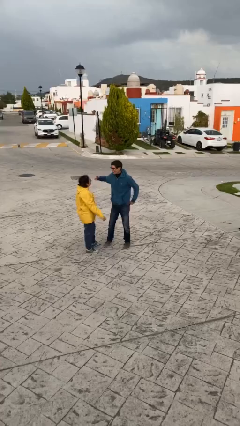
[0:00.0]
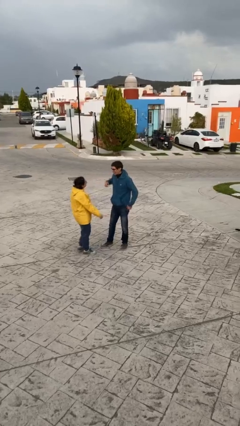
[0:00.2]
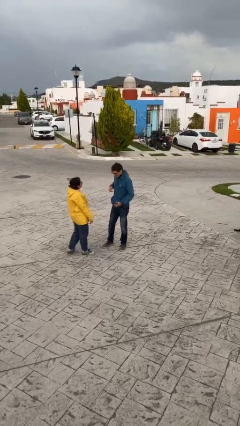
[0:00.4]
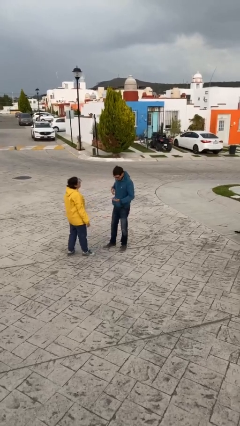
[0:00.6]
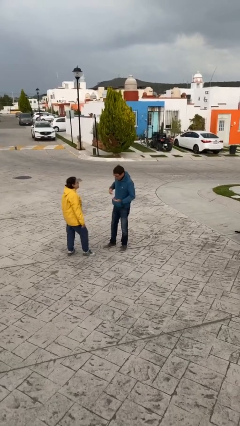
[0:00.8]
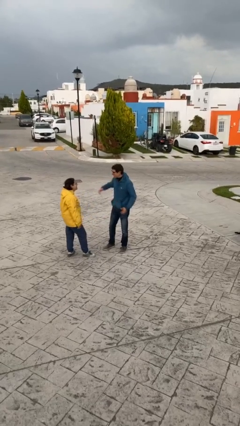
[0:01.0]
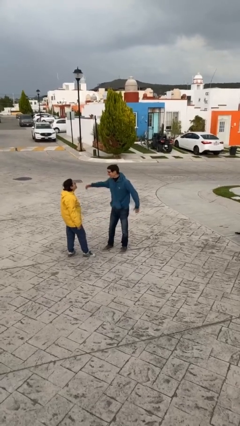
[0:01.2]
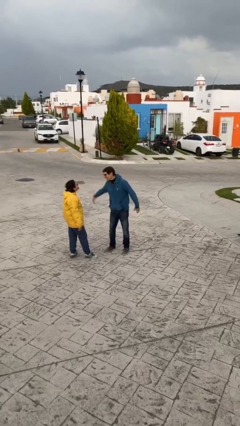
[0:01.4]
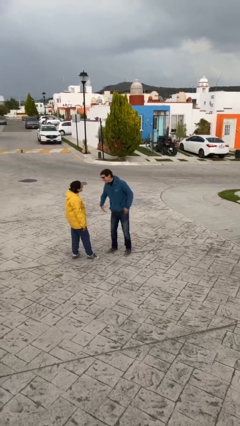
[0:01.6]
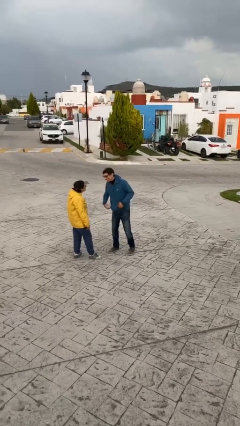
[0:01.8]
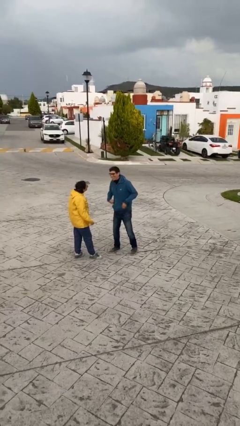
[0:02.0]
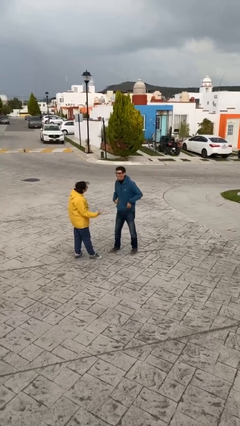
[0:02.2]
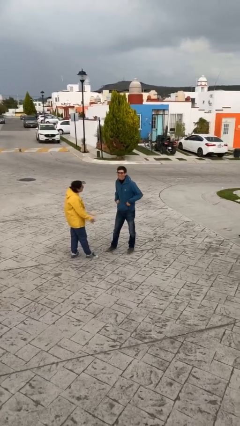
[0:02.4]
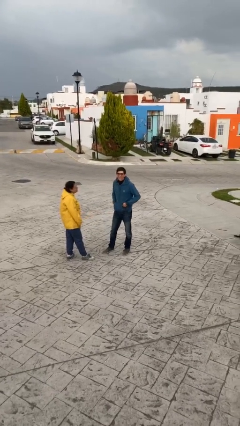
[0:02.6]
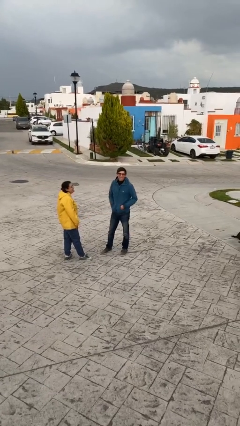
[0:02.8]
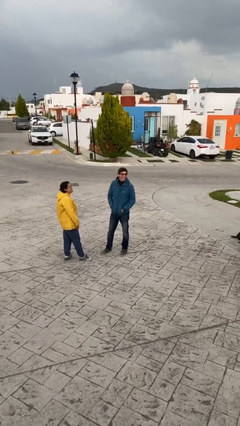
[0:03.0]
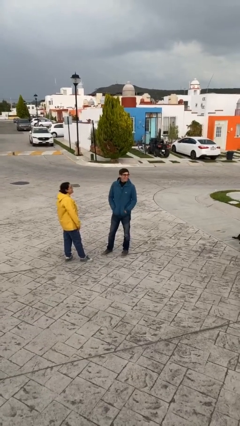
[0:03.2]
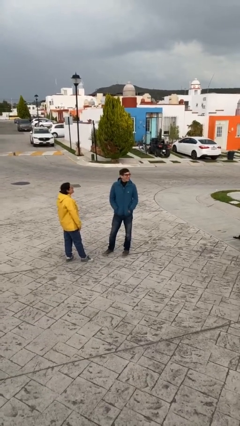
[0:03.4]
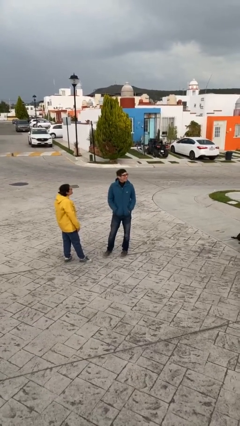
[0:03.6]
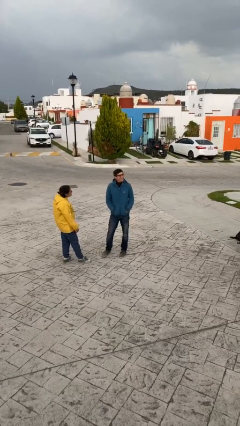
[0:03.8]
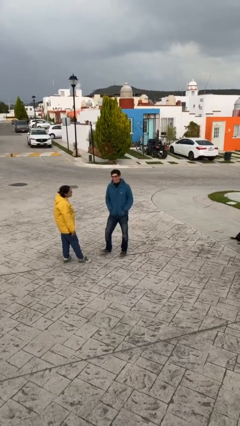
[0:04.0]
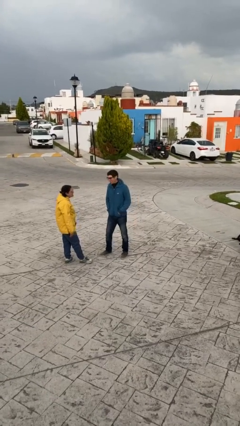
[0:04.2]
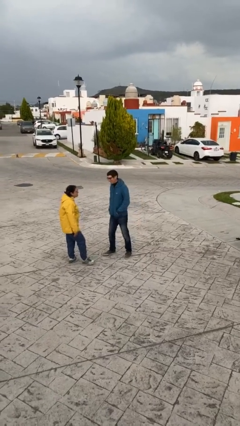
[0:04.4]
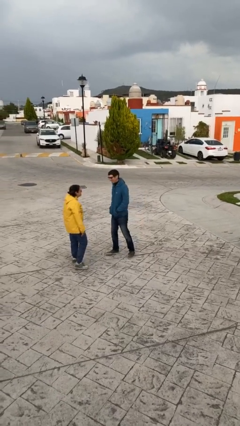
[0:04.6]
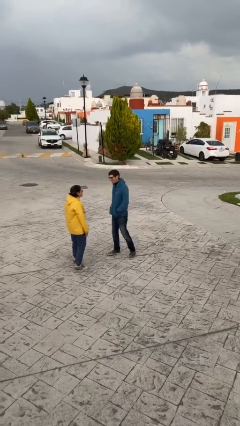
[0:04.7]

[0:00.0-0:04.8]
person talks to person

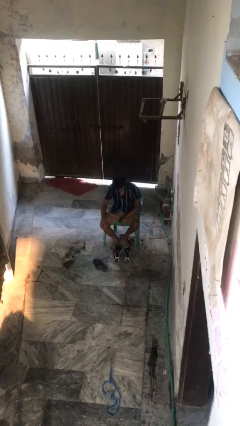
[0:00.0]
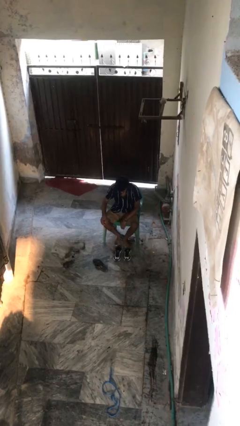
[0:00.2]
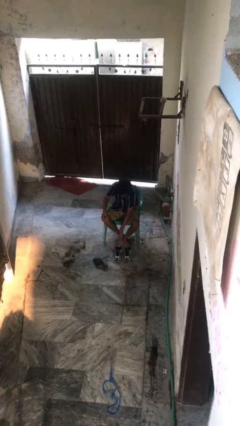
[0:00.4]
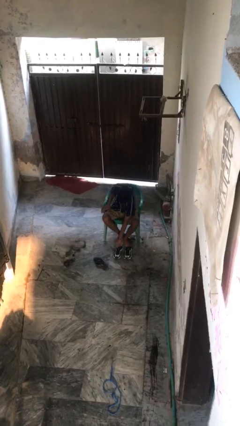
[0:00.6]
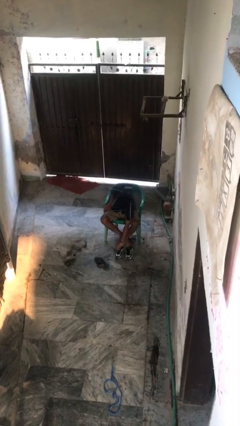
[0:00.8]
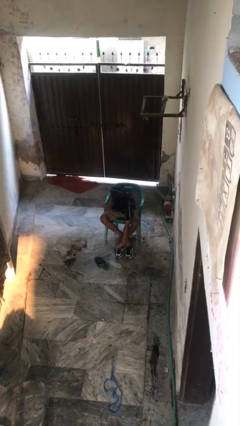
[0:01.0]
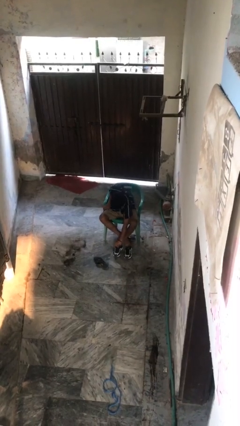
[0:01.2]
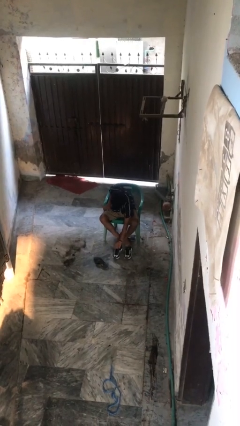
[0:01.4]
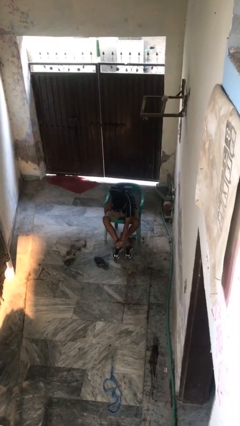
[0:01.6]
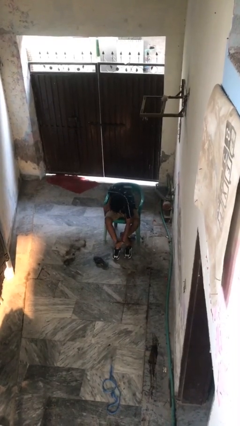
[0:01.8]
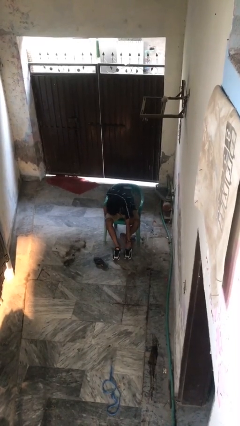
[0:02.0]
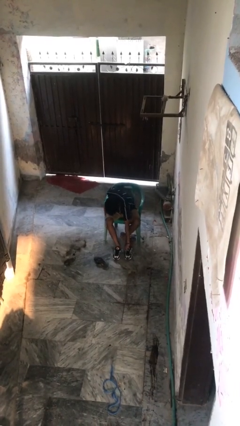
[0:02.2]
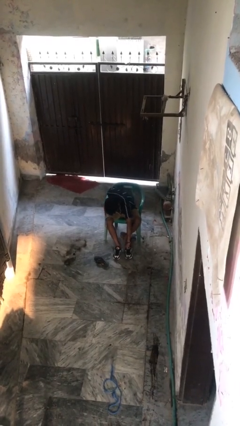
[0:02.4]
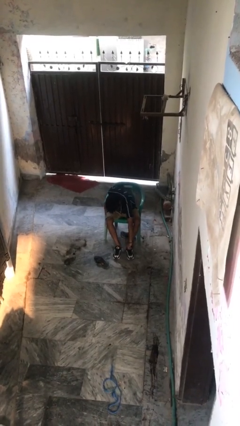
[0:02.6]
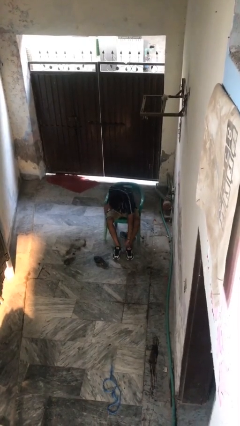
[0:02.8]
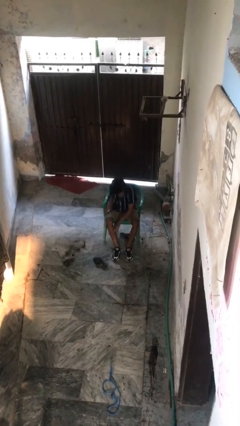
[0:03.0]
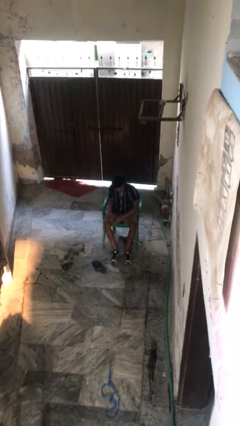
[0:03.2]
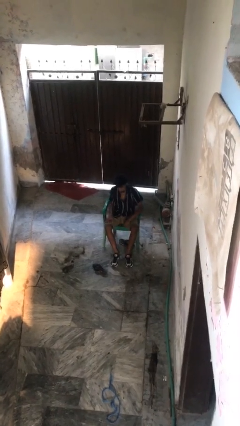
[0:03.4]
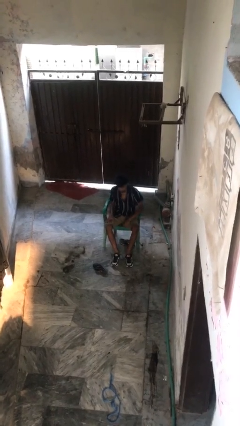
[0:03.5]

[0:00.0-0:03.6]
person puts on shoes

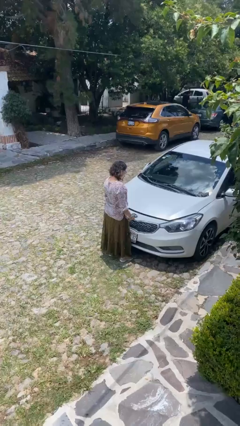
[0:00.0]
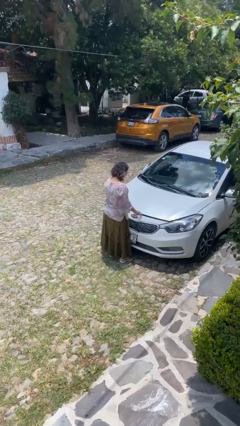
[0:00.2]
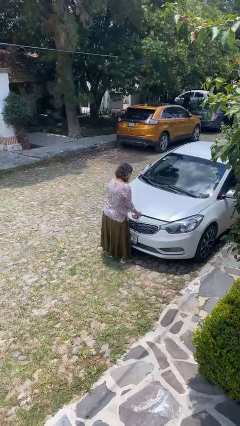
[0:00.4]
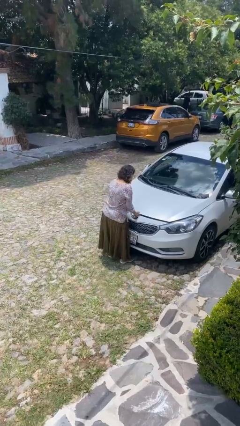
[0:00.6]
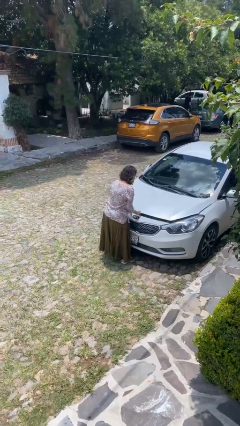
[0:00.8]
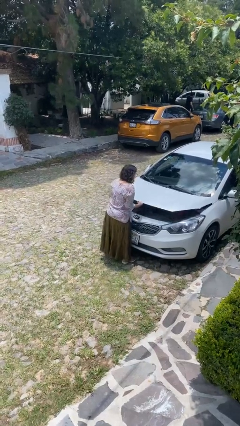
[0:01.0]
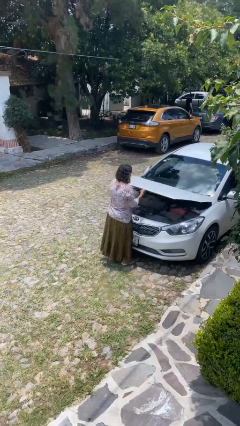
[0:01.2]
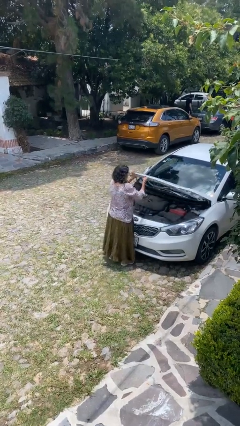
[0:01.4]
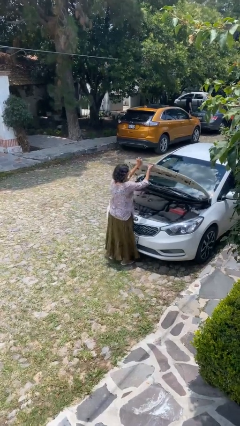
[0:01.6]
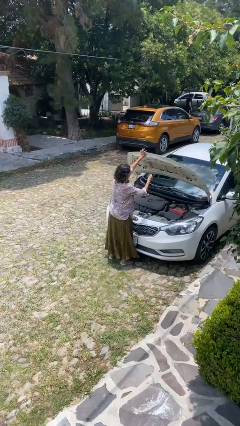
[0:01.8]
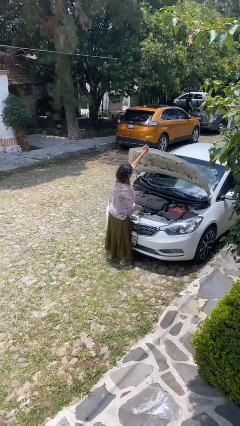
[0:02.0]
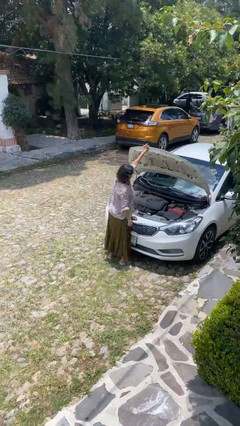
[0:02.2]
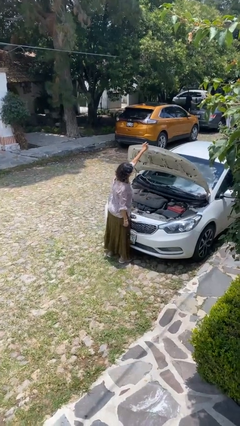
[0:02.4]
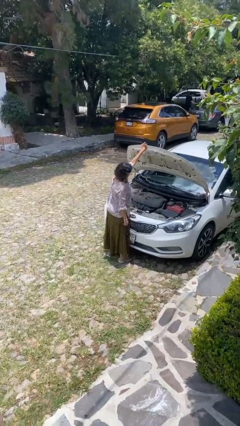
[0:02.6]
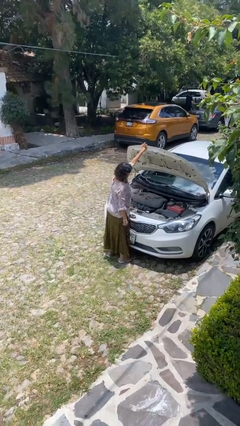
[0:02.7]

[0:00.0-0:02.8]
person opens car hood

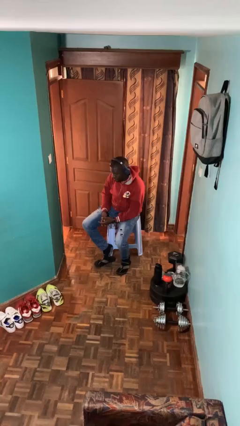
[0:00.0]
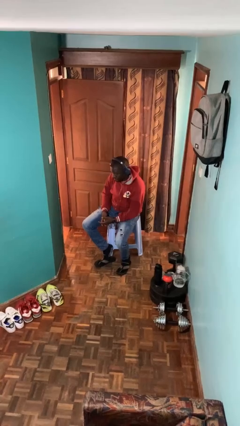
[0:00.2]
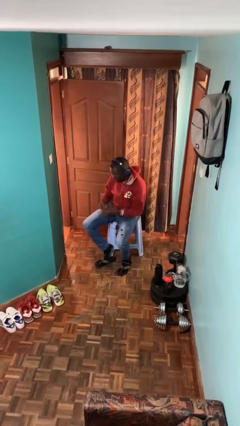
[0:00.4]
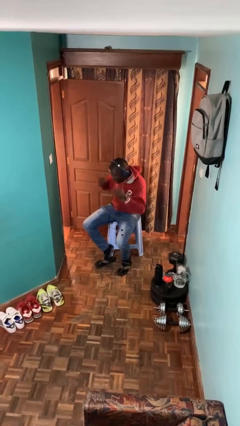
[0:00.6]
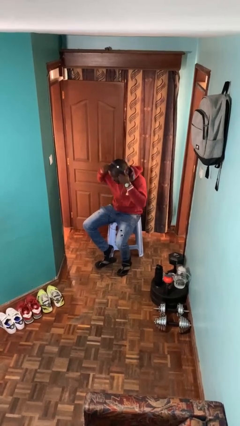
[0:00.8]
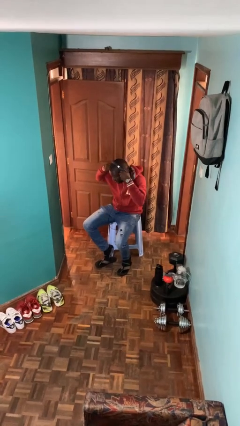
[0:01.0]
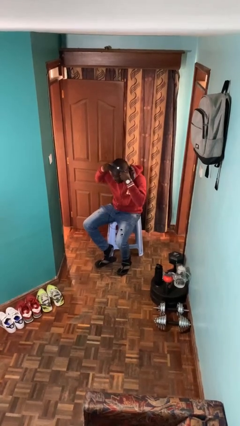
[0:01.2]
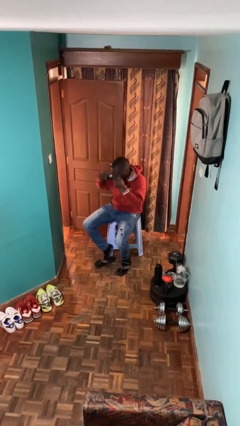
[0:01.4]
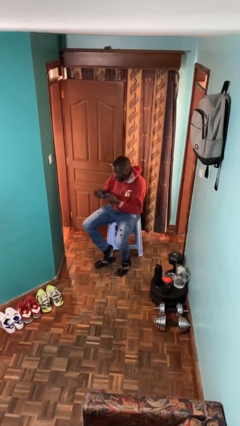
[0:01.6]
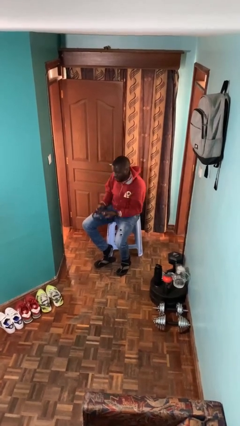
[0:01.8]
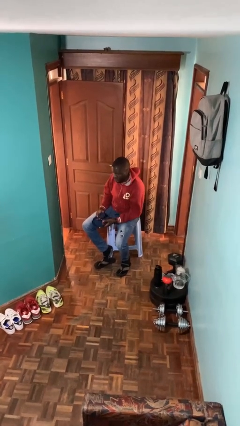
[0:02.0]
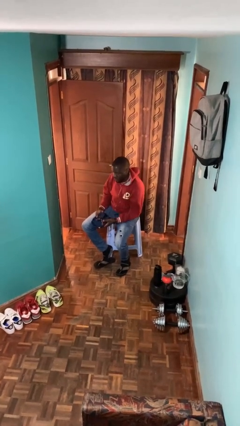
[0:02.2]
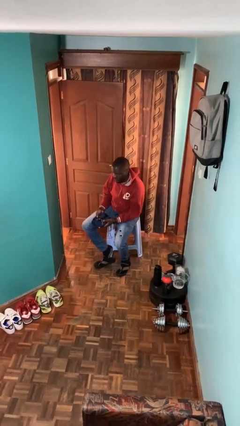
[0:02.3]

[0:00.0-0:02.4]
person takes off headphones

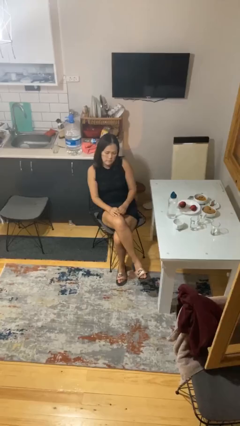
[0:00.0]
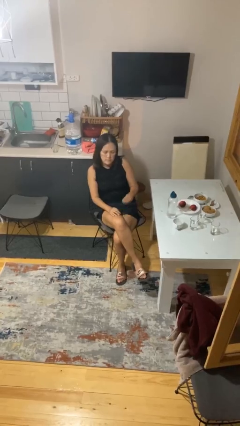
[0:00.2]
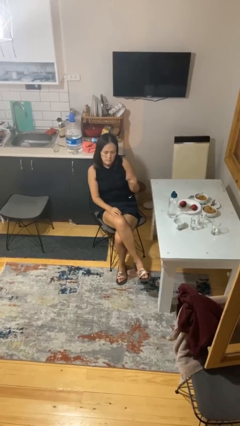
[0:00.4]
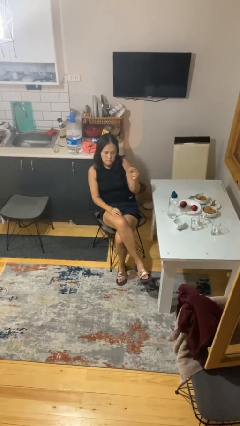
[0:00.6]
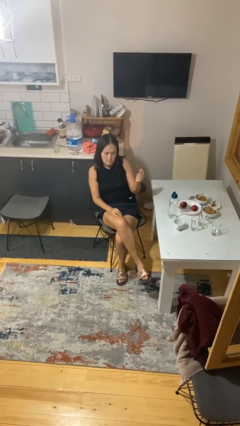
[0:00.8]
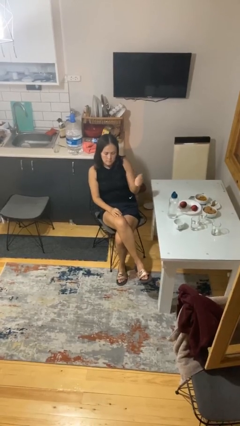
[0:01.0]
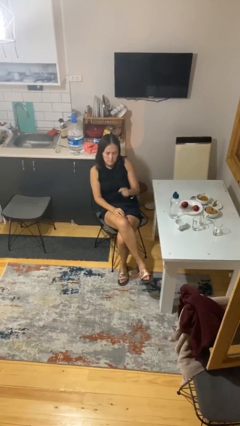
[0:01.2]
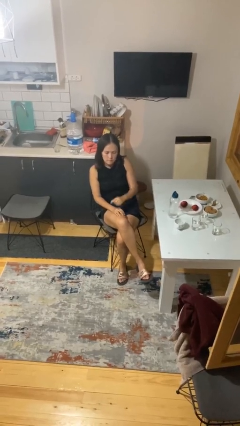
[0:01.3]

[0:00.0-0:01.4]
person snaps fingers

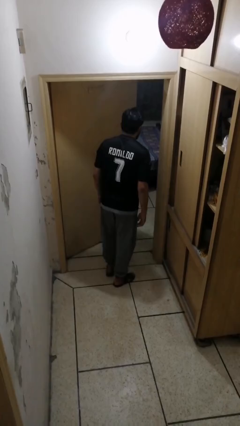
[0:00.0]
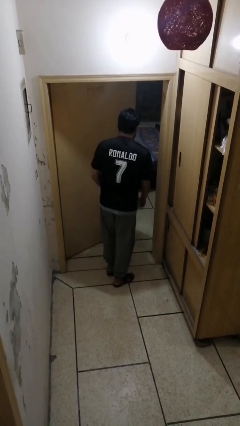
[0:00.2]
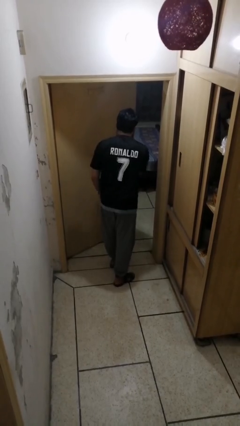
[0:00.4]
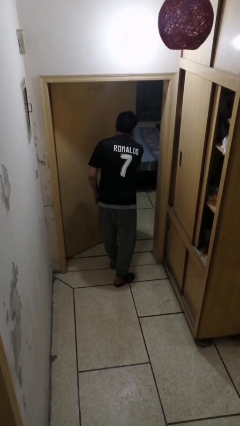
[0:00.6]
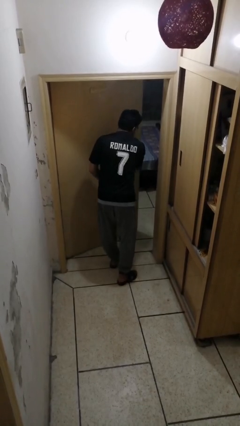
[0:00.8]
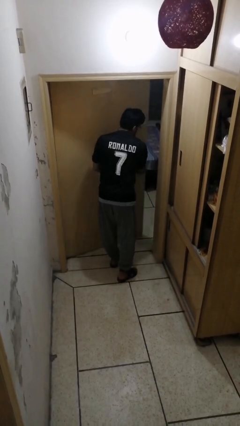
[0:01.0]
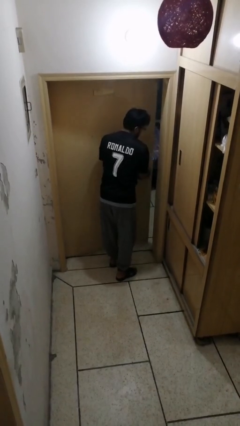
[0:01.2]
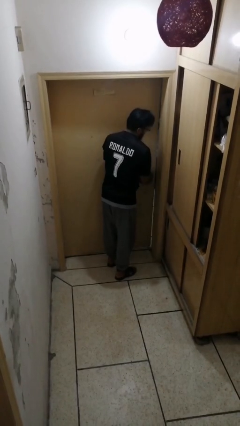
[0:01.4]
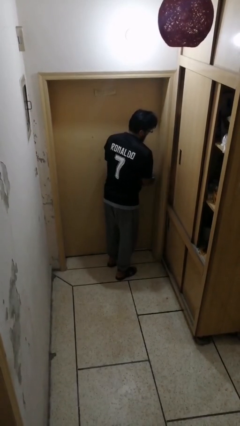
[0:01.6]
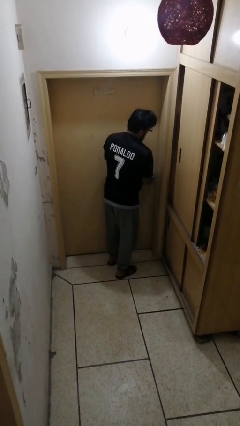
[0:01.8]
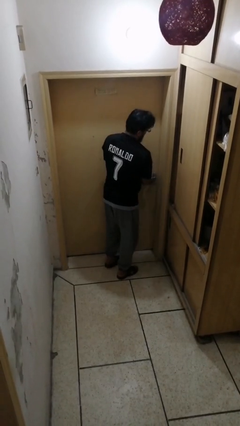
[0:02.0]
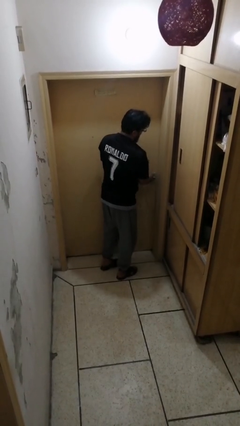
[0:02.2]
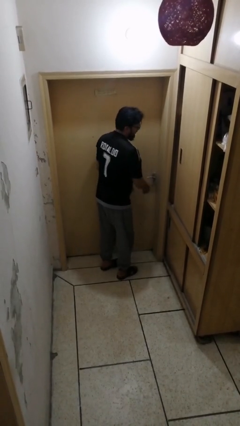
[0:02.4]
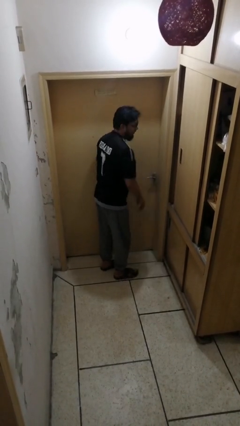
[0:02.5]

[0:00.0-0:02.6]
person closes facility door
